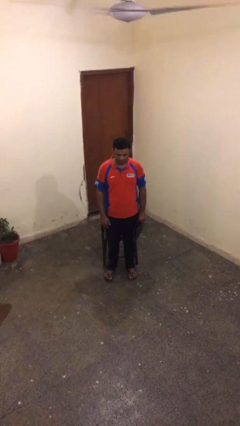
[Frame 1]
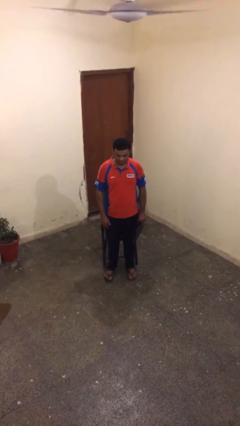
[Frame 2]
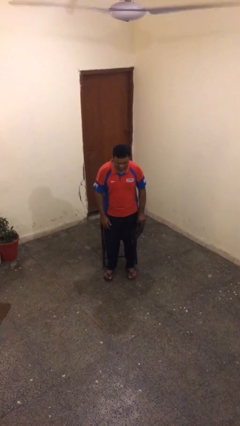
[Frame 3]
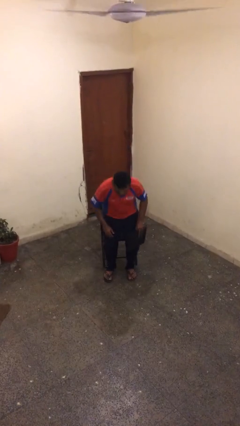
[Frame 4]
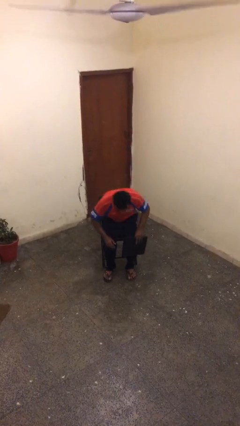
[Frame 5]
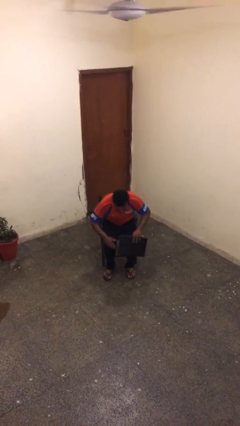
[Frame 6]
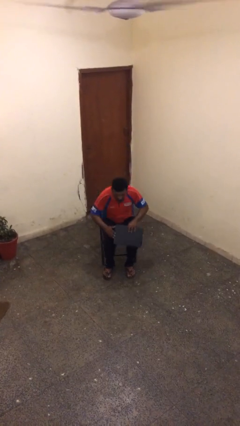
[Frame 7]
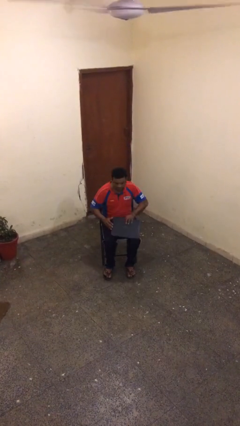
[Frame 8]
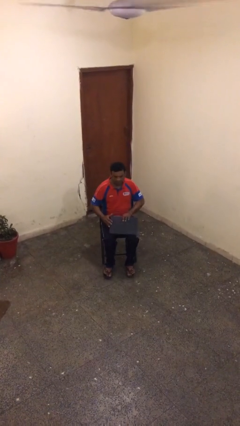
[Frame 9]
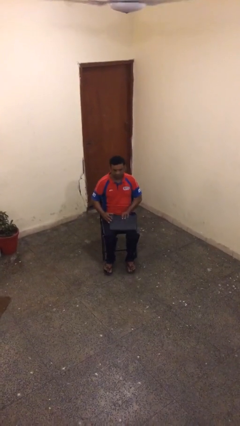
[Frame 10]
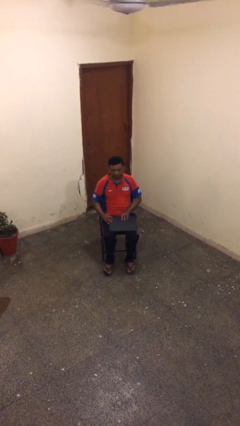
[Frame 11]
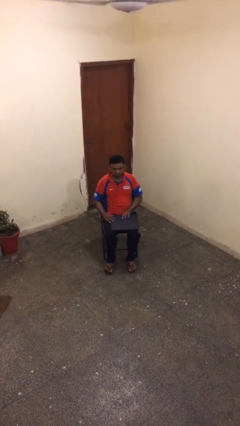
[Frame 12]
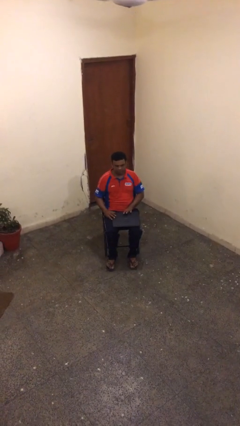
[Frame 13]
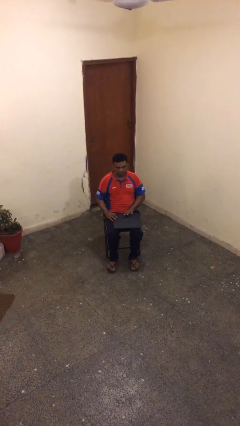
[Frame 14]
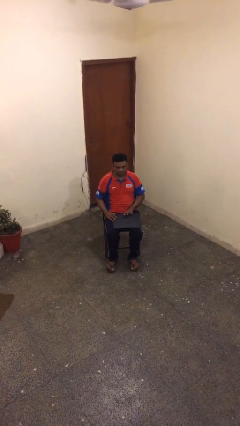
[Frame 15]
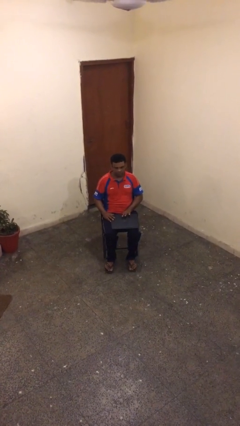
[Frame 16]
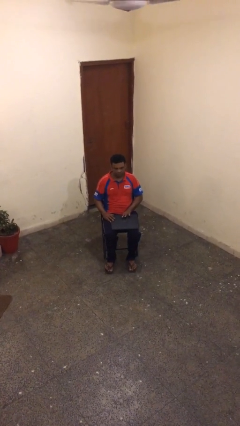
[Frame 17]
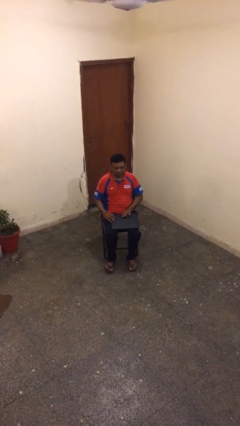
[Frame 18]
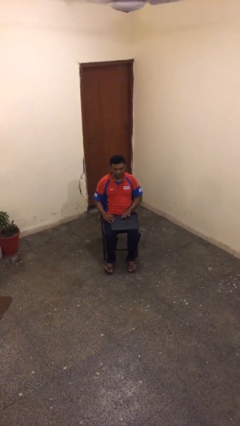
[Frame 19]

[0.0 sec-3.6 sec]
person sits down

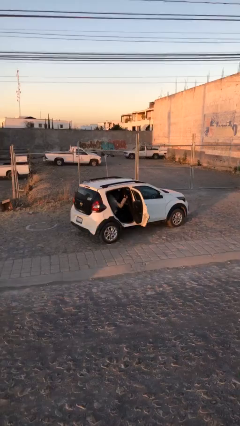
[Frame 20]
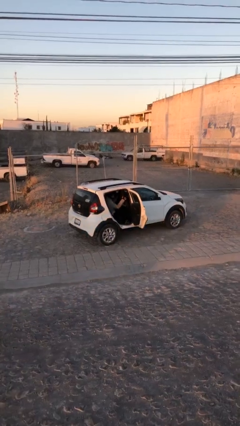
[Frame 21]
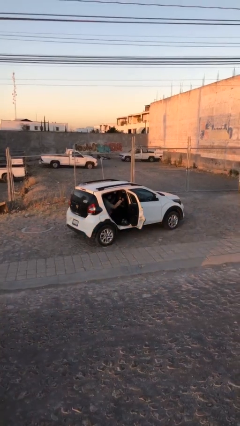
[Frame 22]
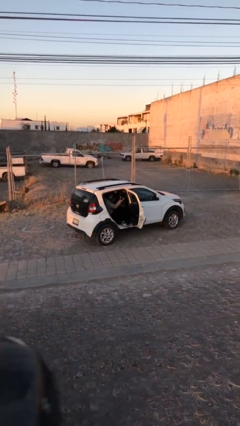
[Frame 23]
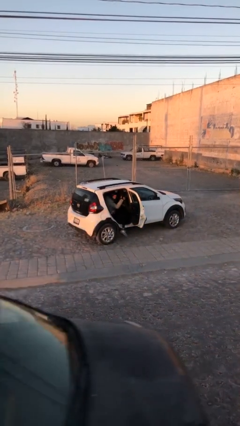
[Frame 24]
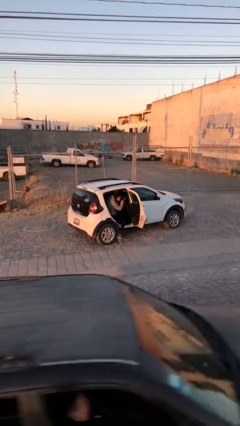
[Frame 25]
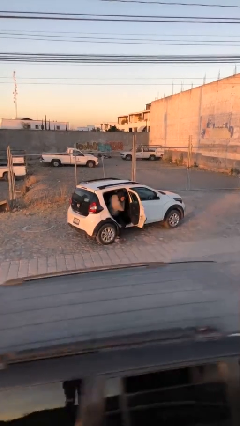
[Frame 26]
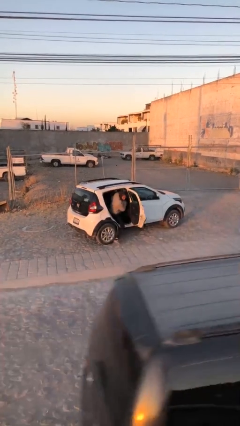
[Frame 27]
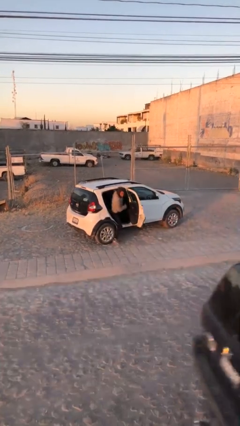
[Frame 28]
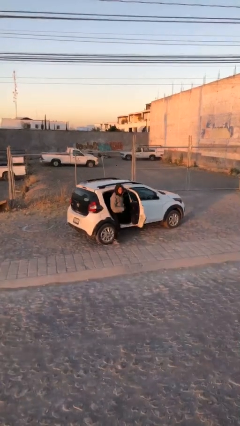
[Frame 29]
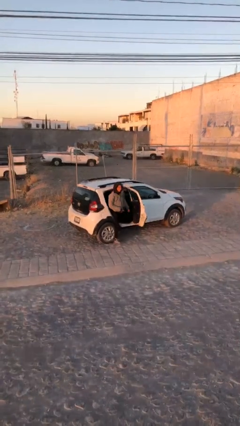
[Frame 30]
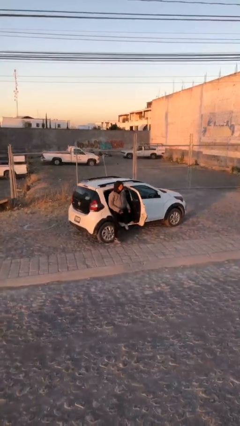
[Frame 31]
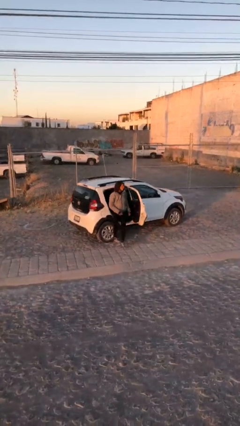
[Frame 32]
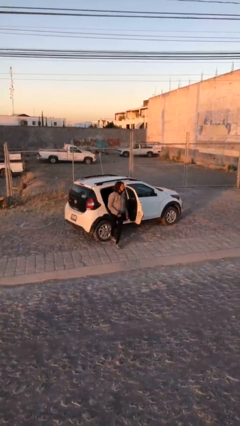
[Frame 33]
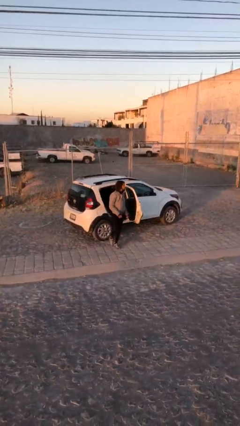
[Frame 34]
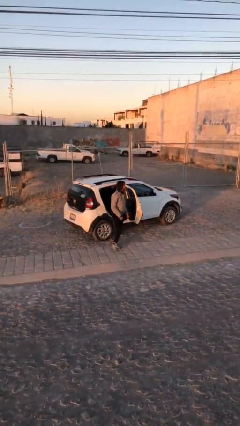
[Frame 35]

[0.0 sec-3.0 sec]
person exits car

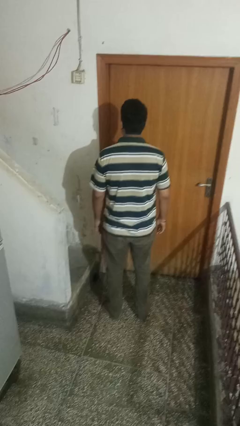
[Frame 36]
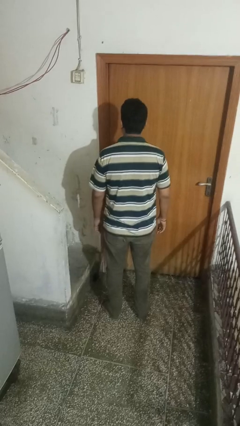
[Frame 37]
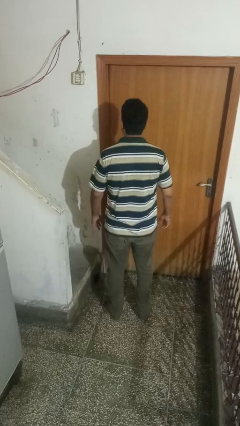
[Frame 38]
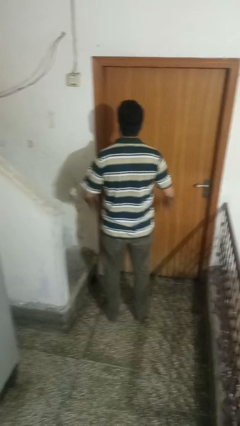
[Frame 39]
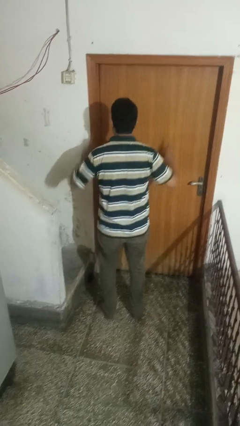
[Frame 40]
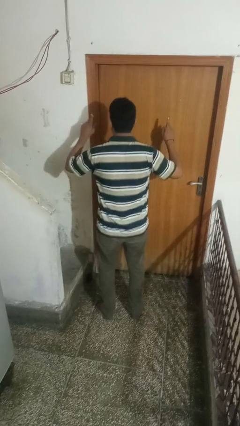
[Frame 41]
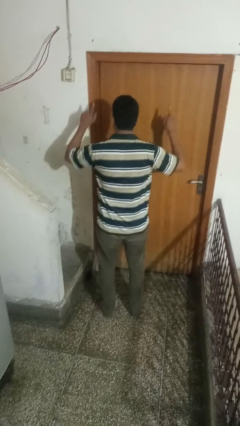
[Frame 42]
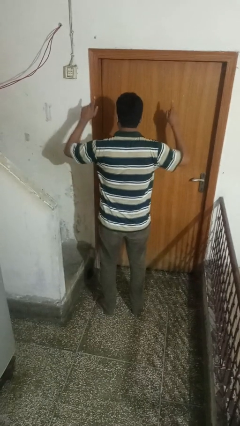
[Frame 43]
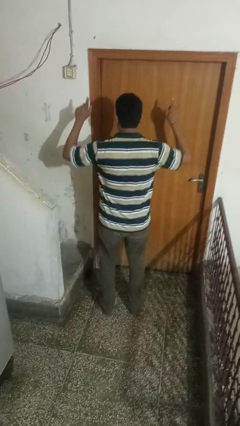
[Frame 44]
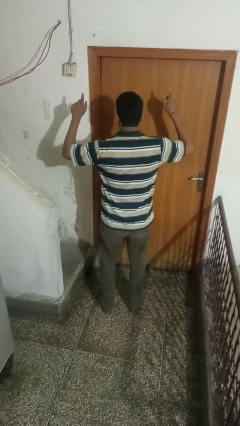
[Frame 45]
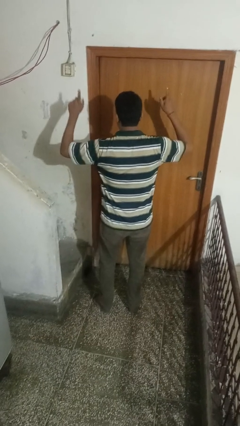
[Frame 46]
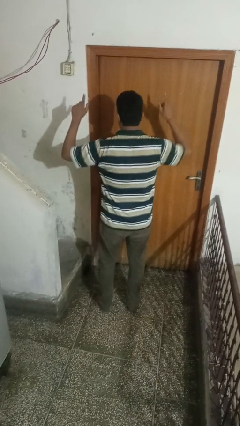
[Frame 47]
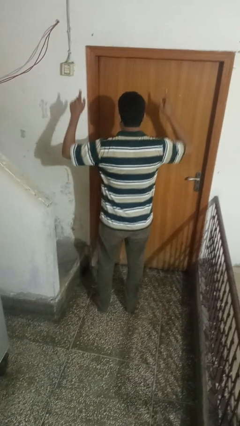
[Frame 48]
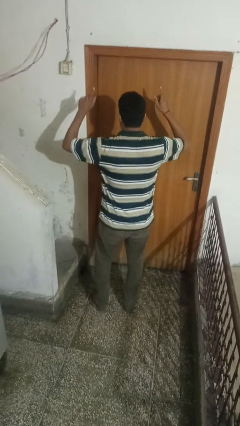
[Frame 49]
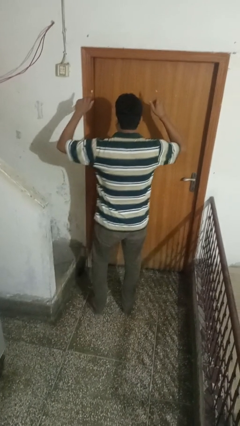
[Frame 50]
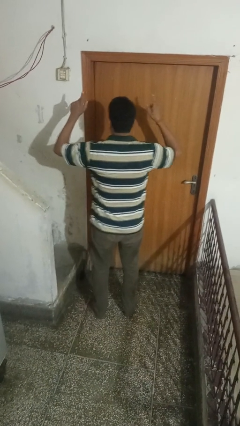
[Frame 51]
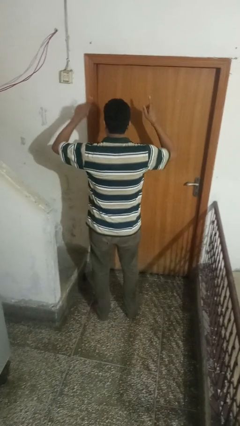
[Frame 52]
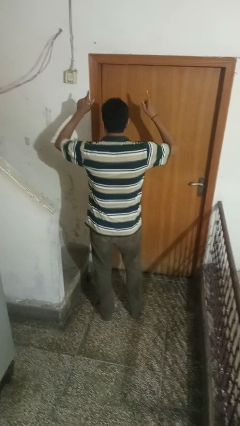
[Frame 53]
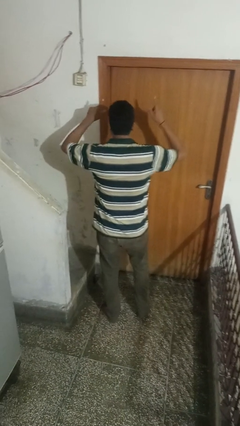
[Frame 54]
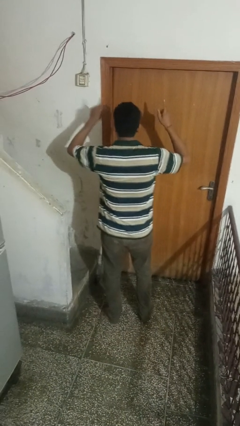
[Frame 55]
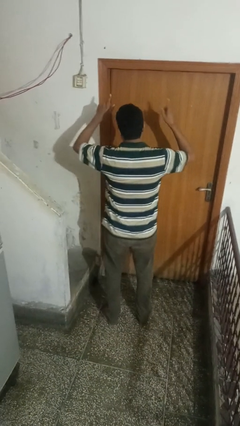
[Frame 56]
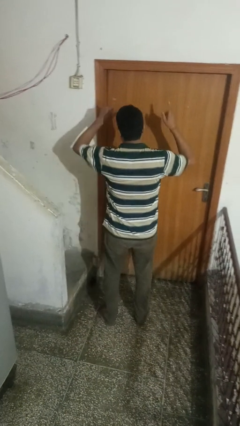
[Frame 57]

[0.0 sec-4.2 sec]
person dances in place

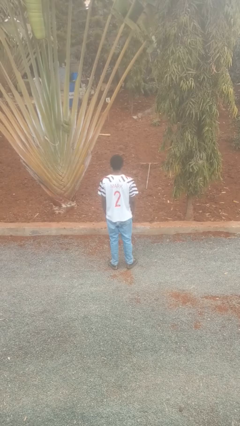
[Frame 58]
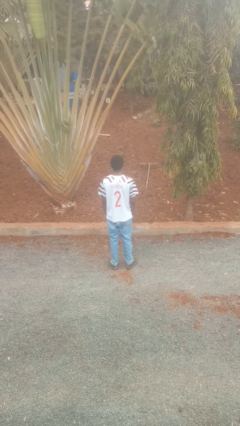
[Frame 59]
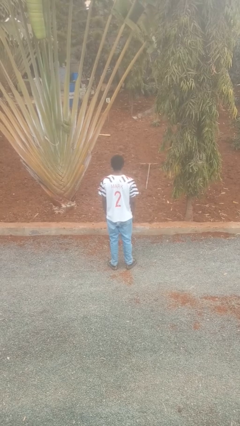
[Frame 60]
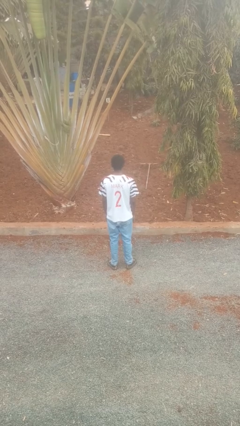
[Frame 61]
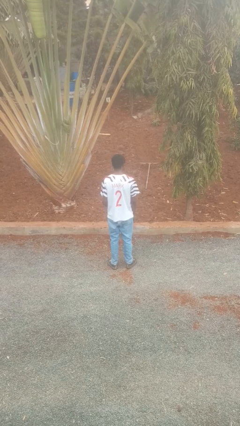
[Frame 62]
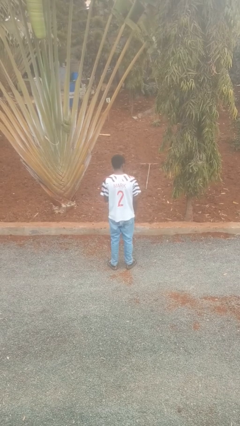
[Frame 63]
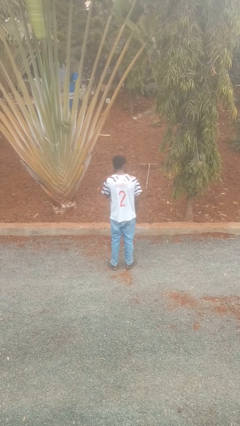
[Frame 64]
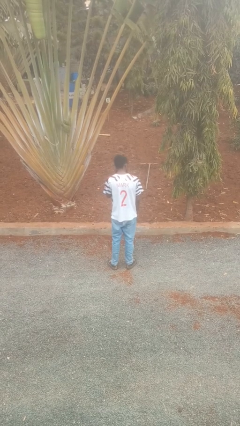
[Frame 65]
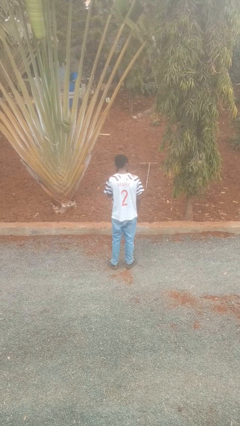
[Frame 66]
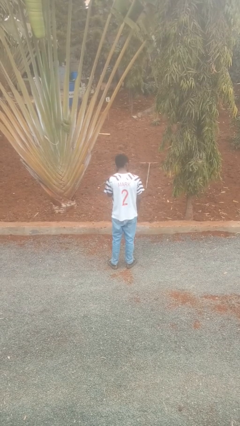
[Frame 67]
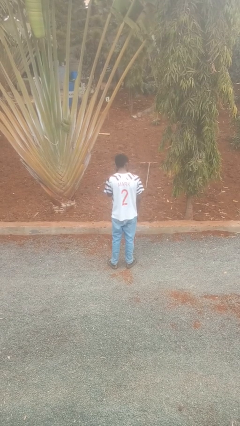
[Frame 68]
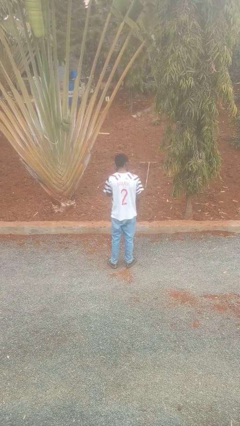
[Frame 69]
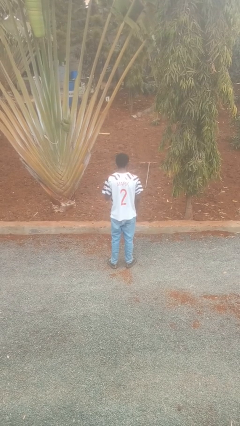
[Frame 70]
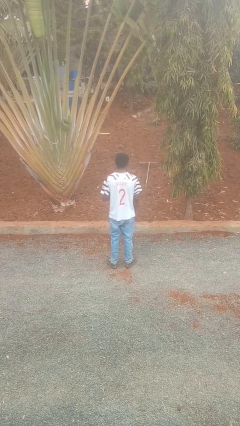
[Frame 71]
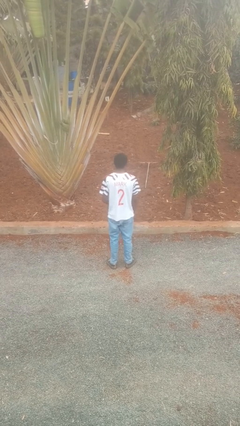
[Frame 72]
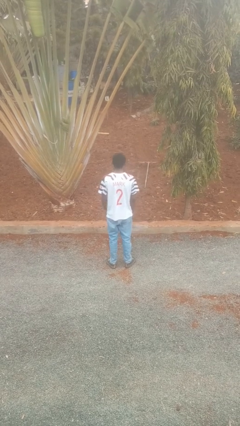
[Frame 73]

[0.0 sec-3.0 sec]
person gestures listen closely

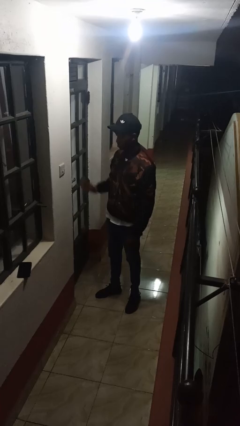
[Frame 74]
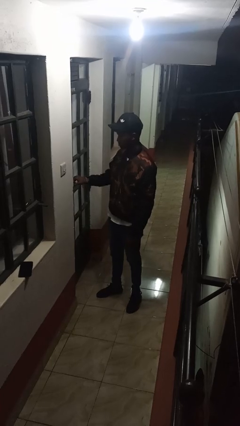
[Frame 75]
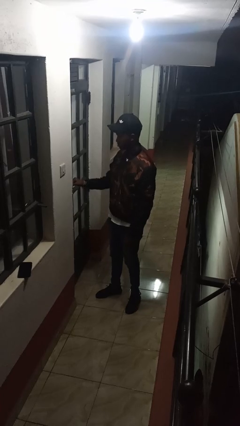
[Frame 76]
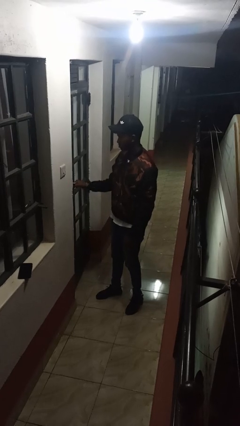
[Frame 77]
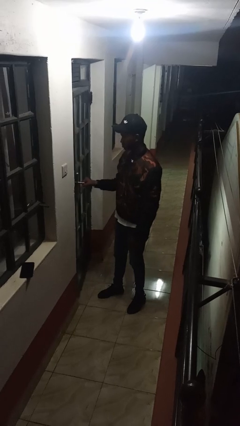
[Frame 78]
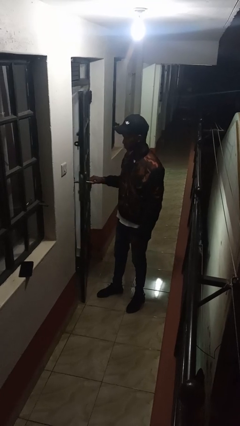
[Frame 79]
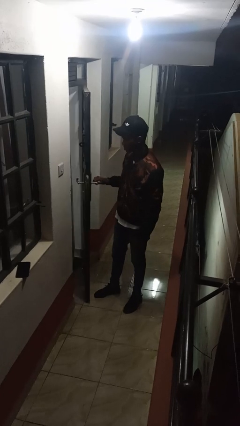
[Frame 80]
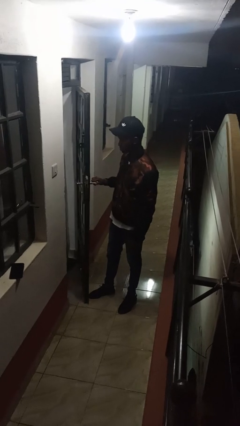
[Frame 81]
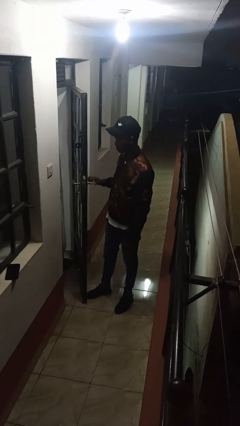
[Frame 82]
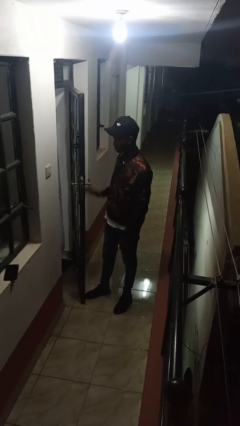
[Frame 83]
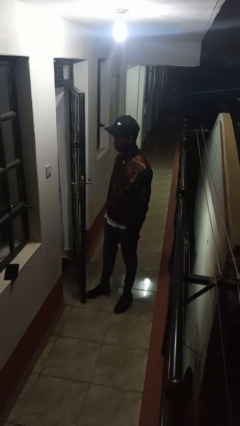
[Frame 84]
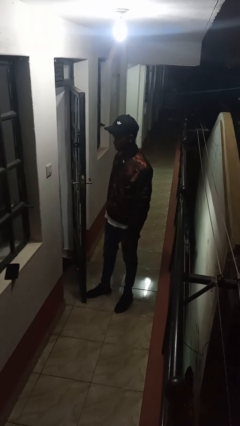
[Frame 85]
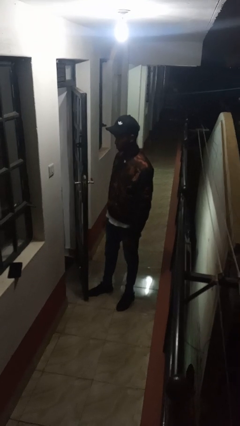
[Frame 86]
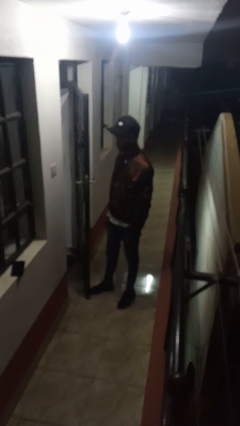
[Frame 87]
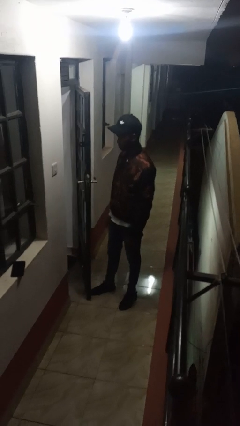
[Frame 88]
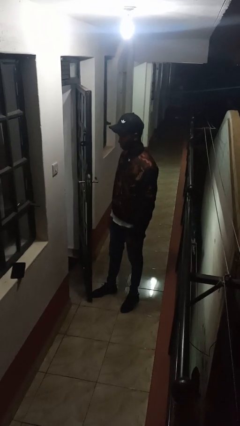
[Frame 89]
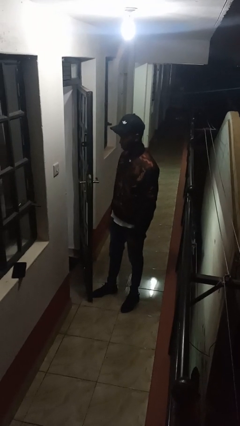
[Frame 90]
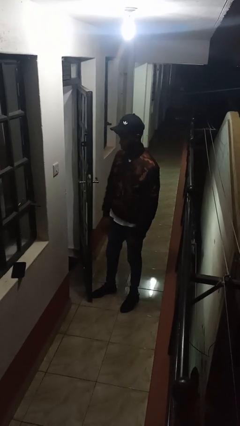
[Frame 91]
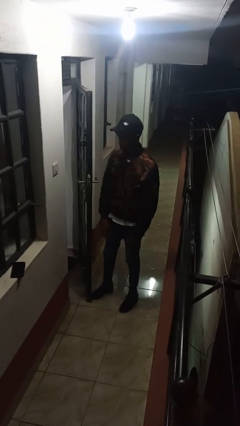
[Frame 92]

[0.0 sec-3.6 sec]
person opens facility door
